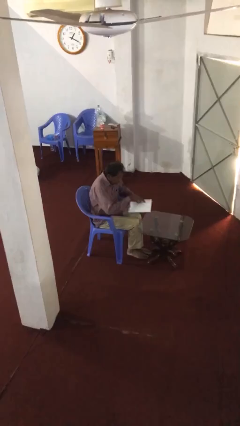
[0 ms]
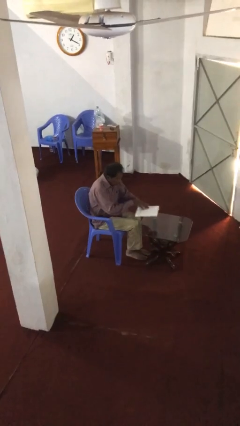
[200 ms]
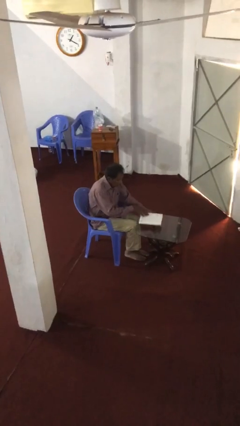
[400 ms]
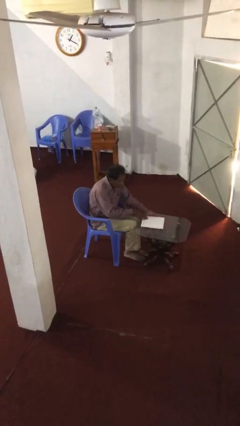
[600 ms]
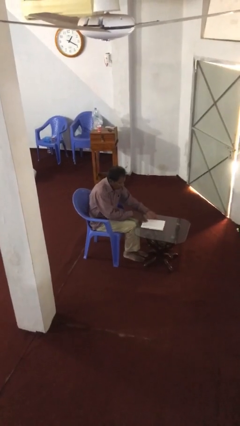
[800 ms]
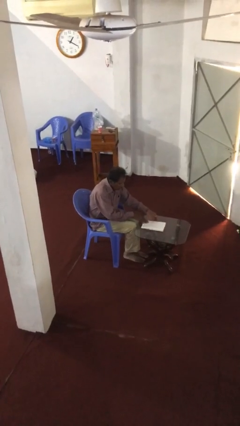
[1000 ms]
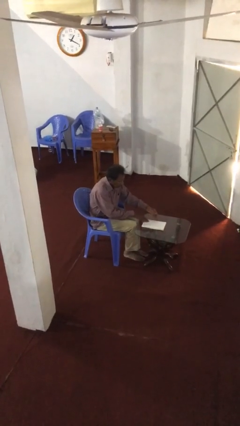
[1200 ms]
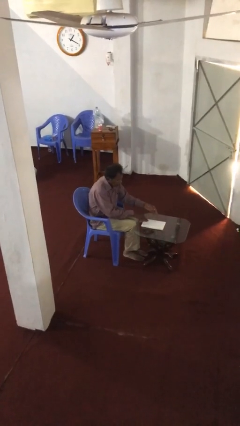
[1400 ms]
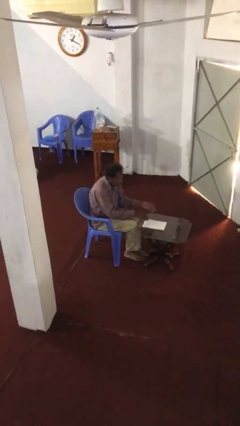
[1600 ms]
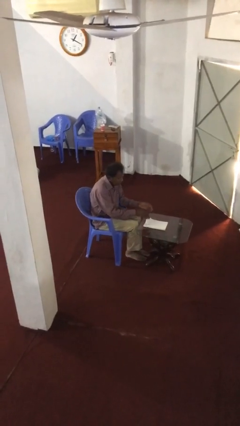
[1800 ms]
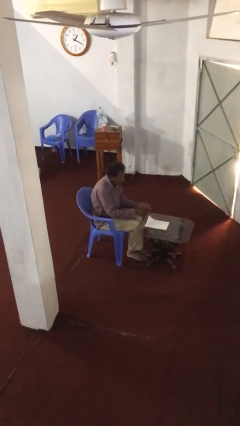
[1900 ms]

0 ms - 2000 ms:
person puts down object on table

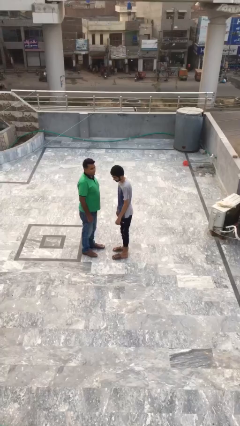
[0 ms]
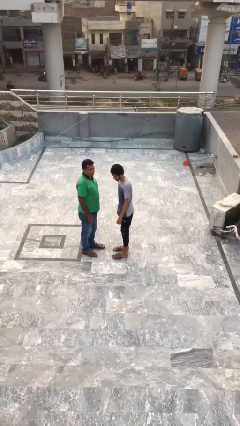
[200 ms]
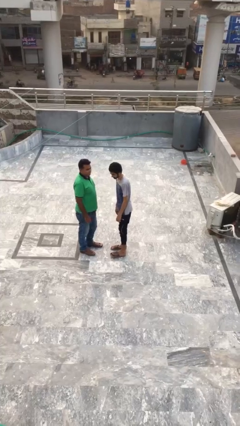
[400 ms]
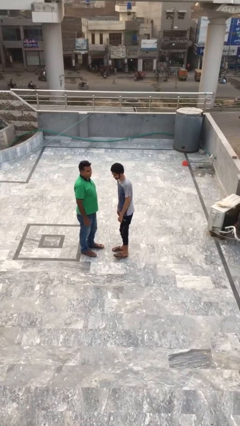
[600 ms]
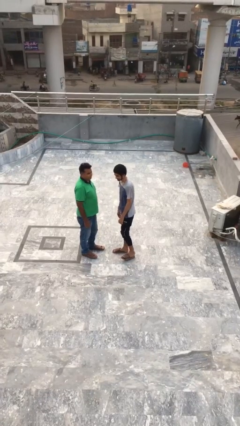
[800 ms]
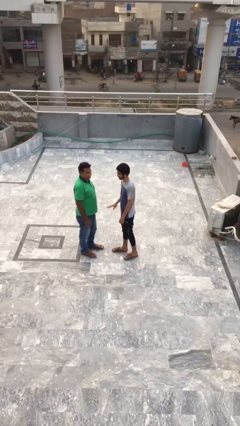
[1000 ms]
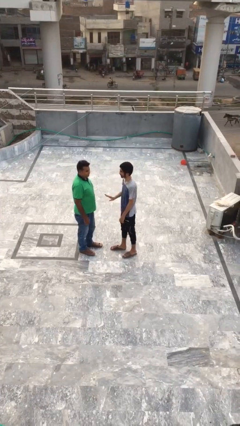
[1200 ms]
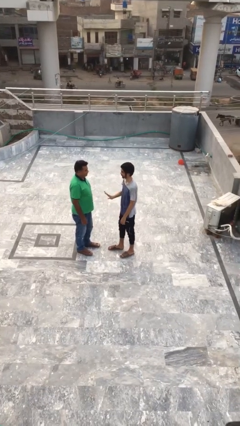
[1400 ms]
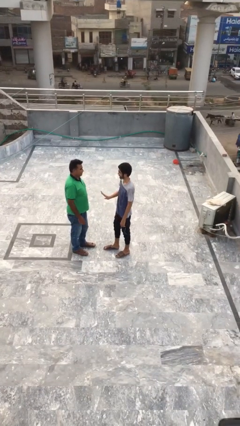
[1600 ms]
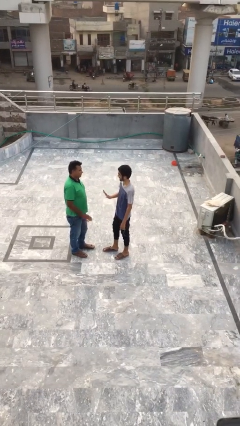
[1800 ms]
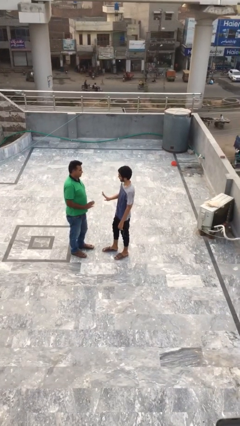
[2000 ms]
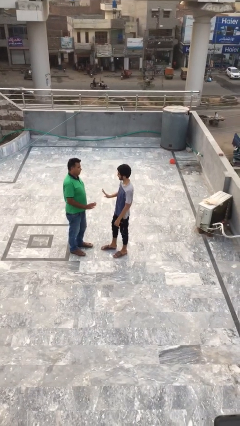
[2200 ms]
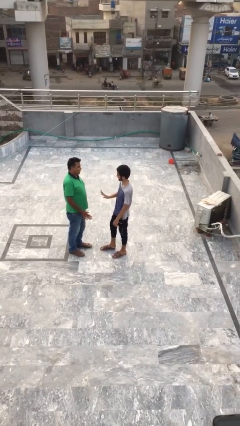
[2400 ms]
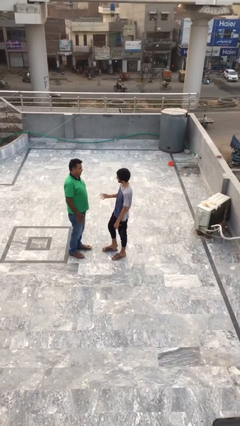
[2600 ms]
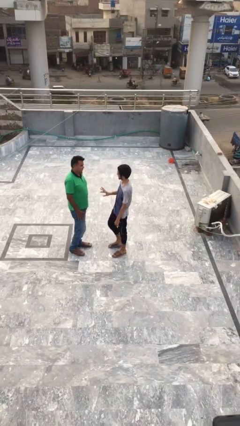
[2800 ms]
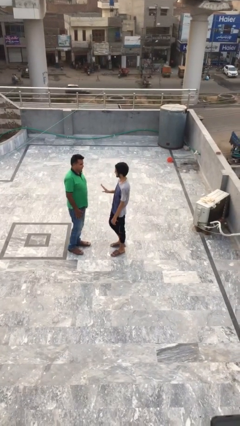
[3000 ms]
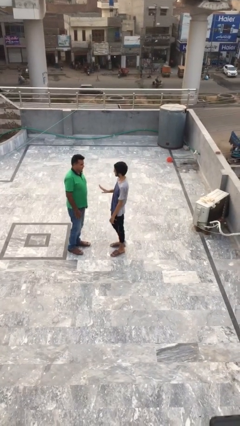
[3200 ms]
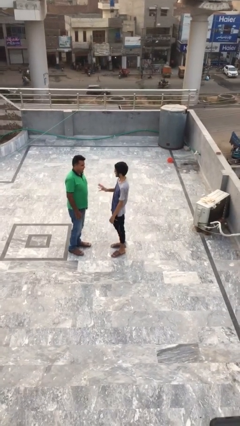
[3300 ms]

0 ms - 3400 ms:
person talks to person

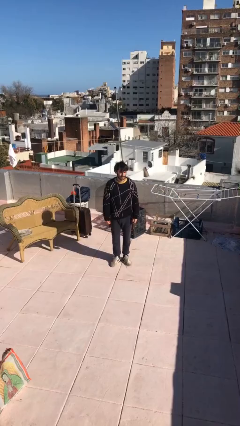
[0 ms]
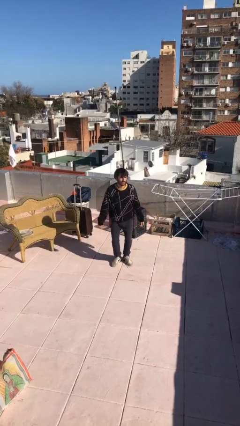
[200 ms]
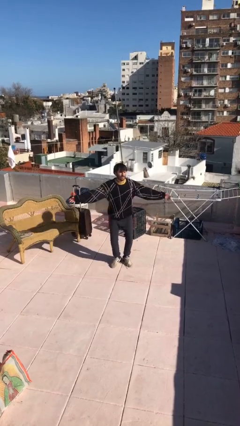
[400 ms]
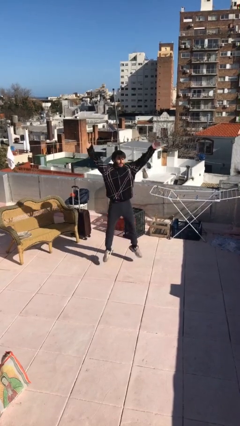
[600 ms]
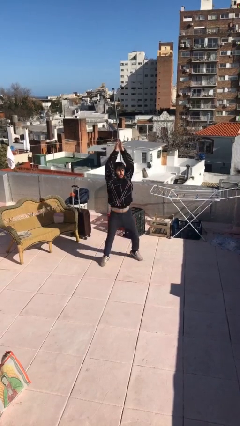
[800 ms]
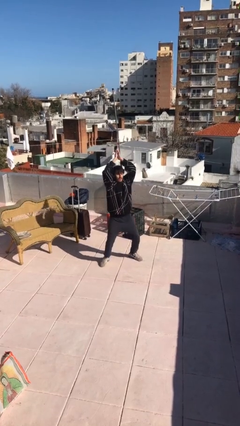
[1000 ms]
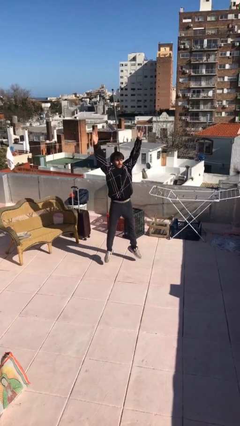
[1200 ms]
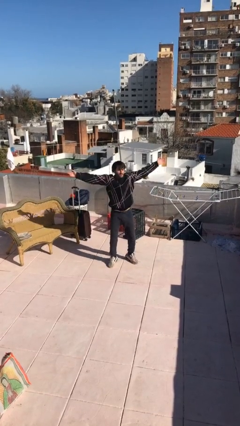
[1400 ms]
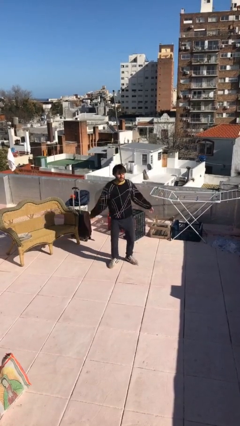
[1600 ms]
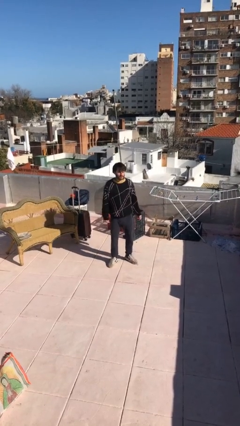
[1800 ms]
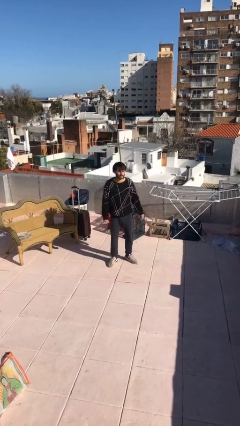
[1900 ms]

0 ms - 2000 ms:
person exercises with jumping jacks

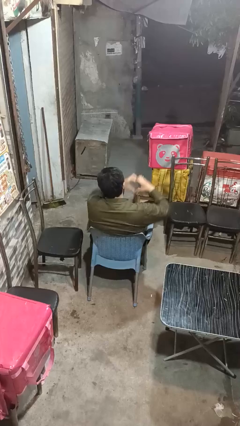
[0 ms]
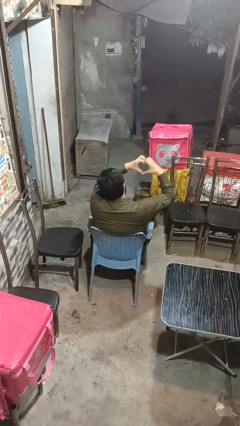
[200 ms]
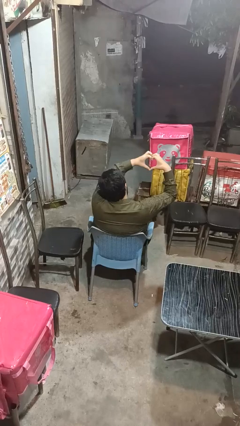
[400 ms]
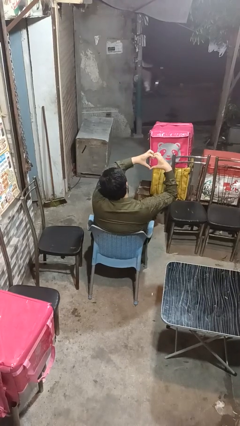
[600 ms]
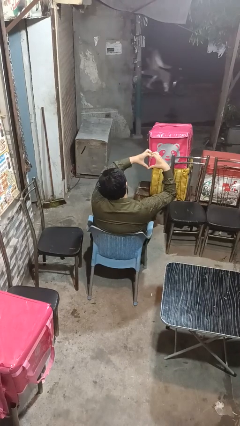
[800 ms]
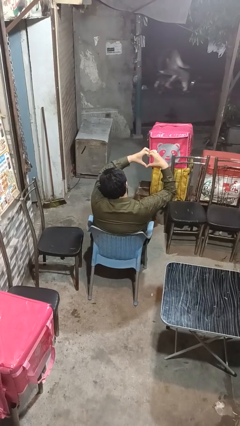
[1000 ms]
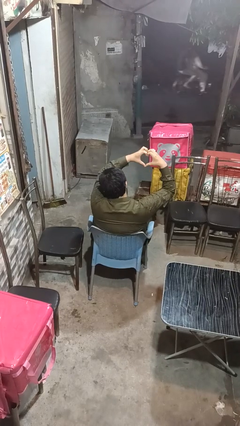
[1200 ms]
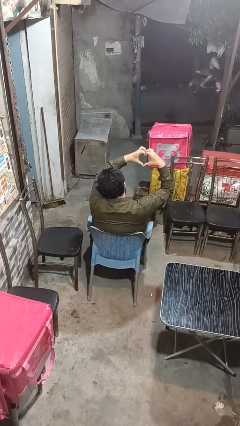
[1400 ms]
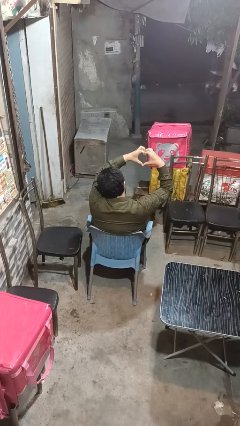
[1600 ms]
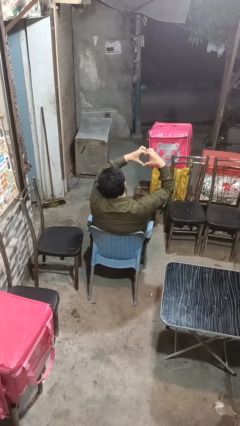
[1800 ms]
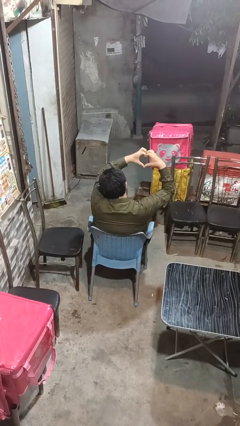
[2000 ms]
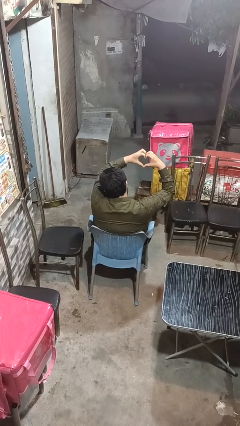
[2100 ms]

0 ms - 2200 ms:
person gestures heart

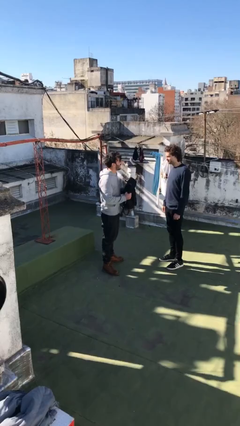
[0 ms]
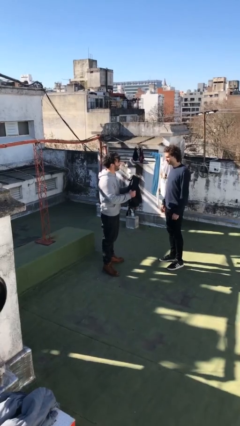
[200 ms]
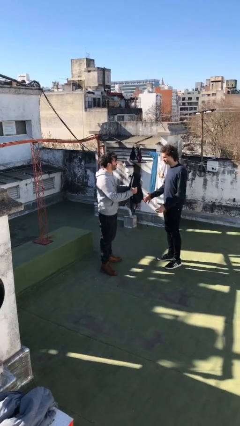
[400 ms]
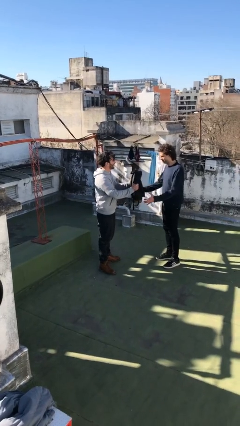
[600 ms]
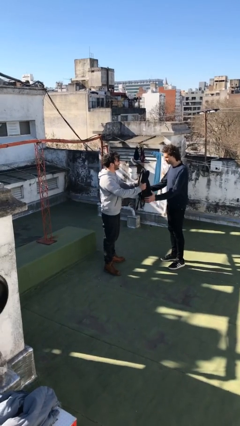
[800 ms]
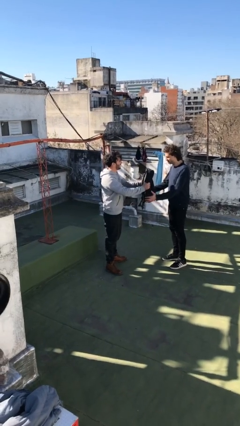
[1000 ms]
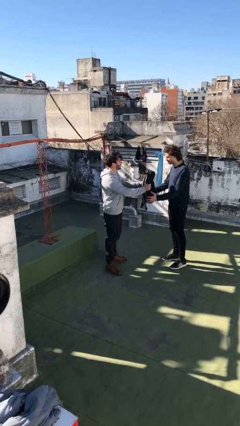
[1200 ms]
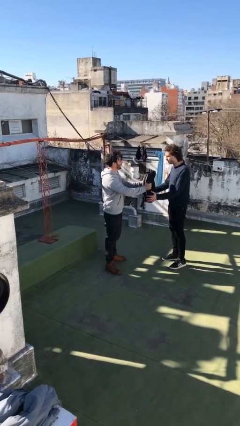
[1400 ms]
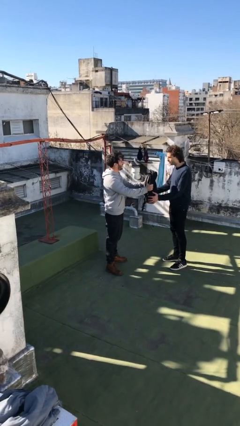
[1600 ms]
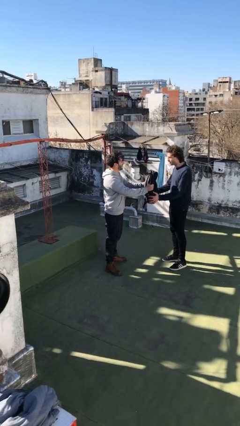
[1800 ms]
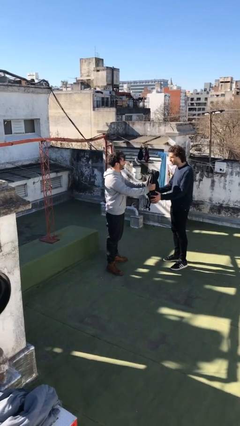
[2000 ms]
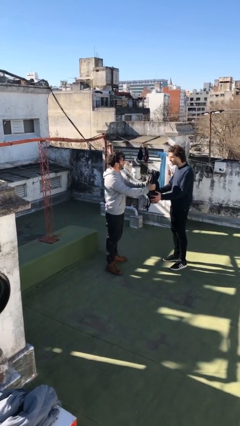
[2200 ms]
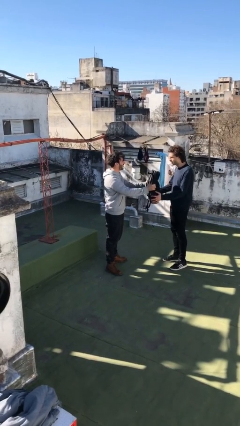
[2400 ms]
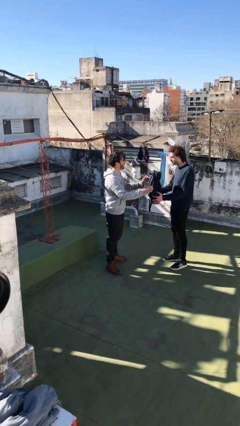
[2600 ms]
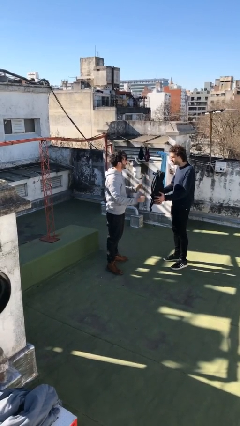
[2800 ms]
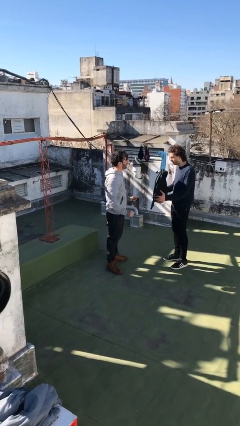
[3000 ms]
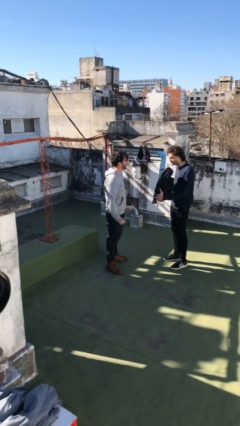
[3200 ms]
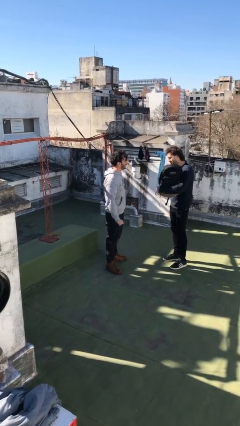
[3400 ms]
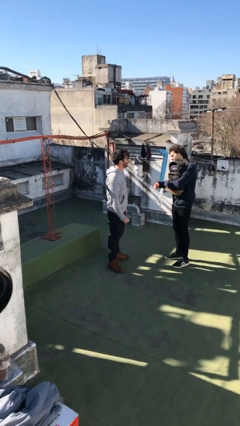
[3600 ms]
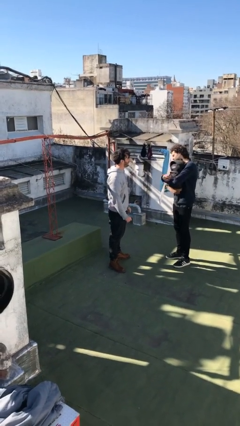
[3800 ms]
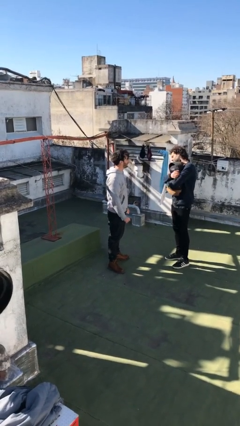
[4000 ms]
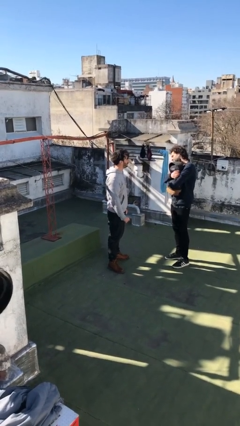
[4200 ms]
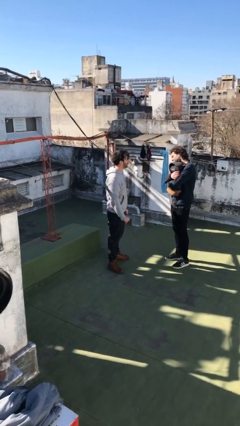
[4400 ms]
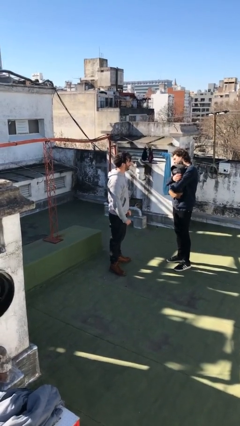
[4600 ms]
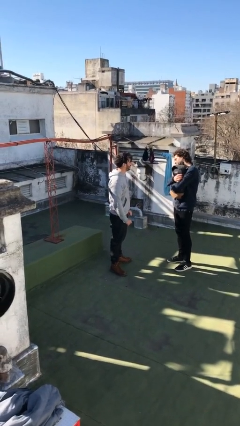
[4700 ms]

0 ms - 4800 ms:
person transfers object to person

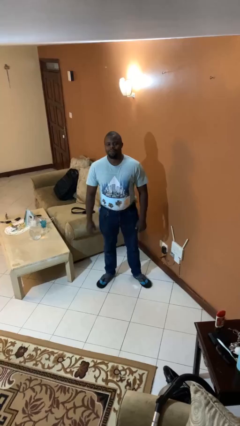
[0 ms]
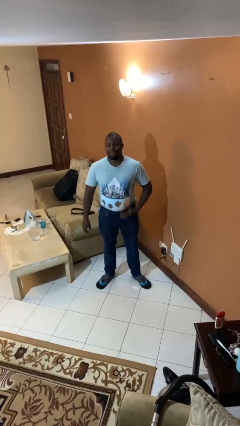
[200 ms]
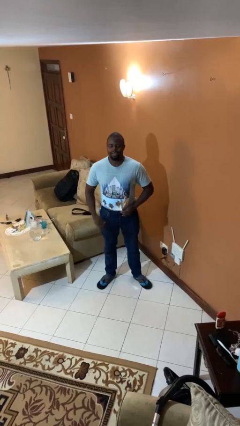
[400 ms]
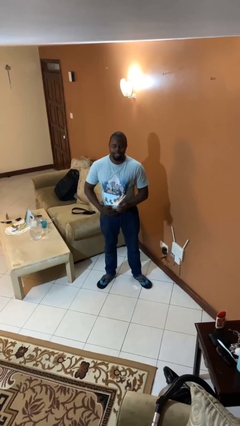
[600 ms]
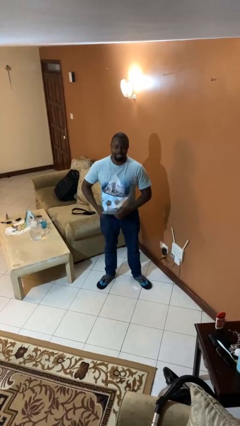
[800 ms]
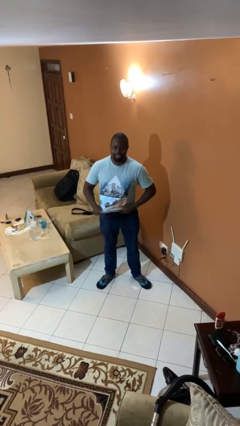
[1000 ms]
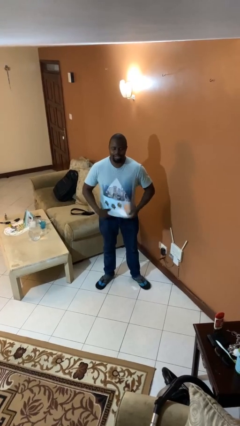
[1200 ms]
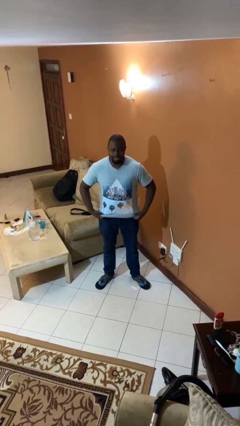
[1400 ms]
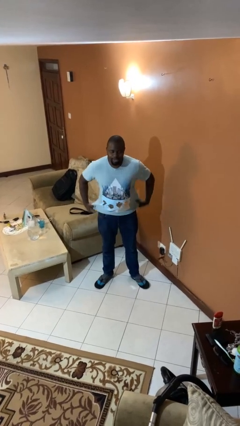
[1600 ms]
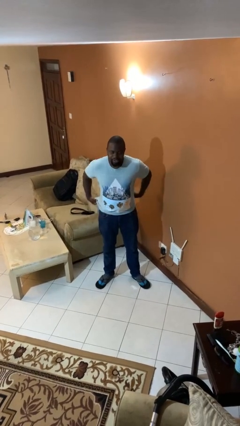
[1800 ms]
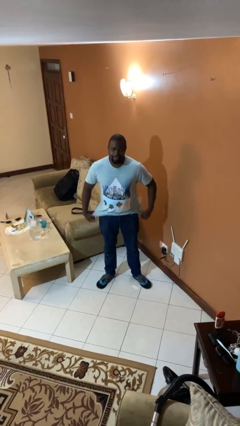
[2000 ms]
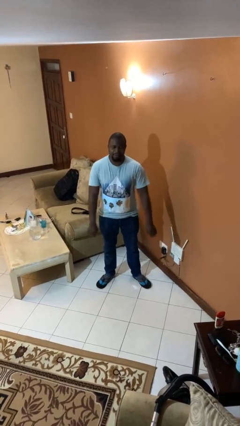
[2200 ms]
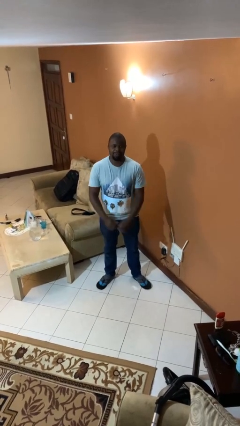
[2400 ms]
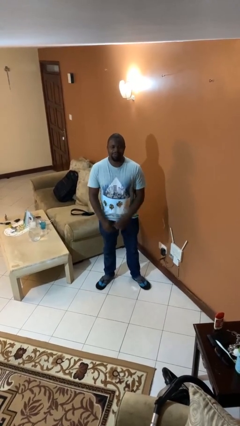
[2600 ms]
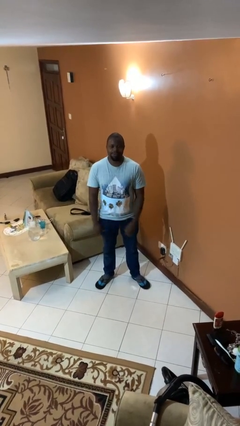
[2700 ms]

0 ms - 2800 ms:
person untucks shirt

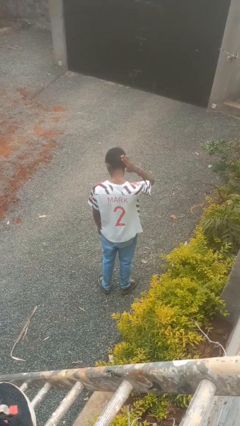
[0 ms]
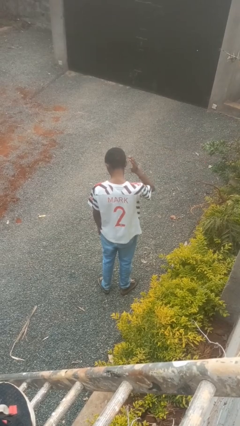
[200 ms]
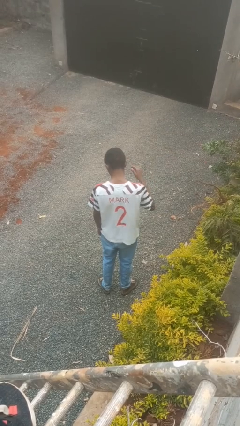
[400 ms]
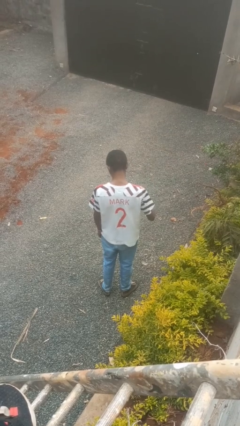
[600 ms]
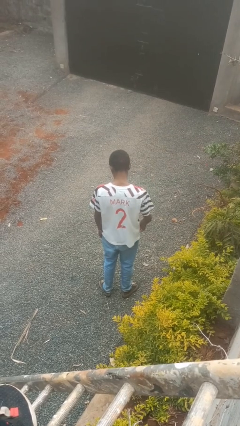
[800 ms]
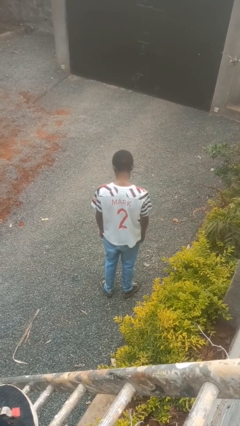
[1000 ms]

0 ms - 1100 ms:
person pats head
